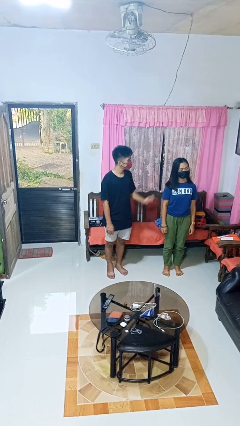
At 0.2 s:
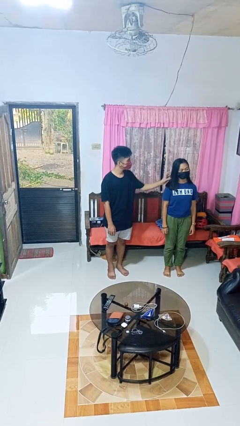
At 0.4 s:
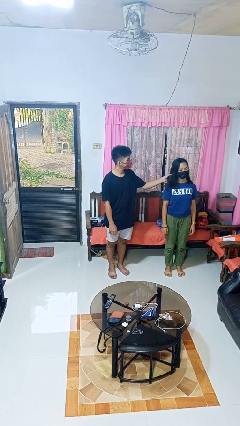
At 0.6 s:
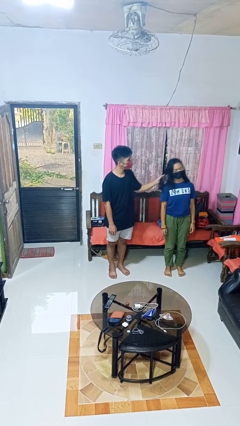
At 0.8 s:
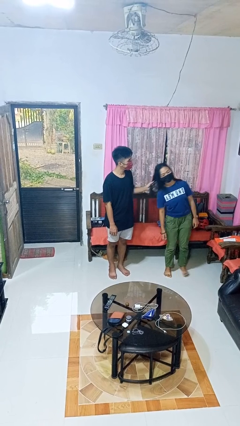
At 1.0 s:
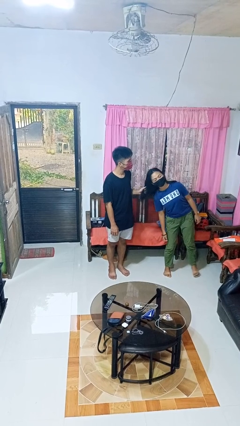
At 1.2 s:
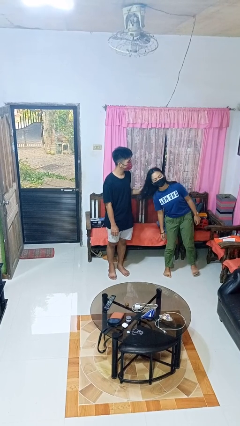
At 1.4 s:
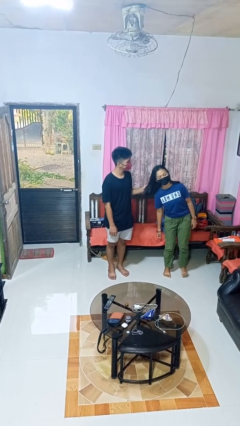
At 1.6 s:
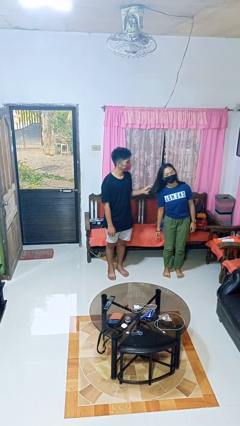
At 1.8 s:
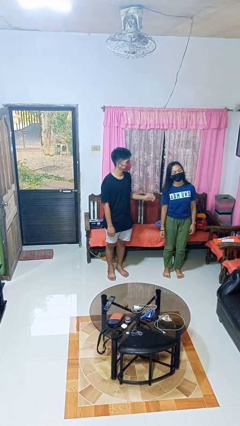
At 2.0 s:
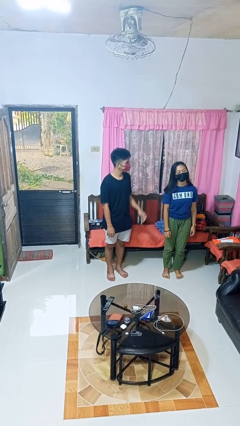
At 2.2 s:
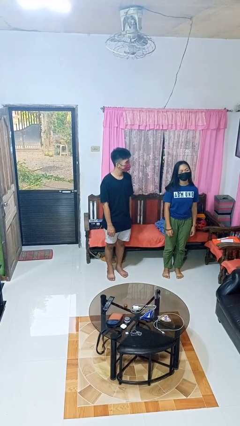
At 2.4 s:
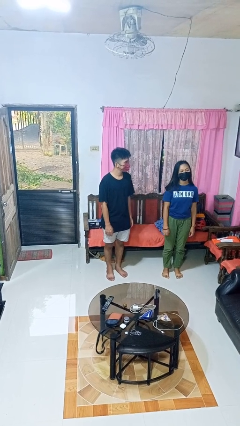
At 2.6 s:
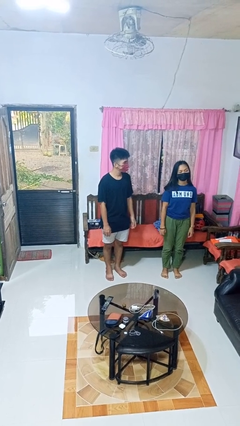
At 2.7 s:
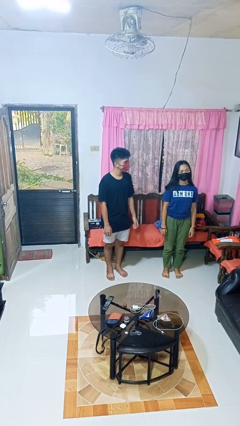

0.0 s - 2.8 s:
person grabs person by hair

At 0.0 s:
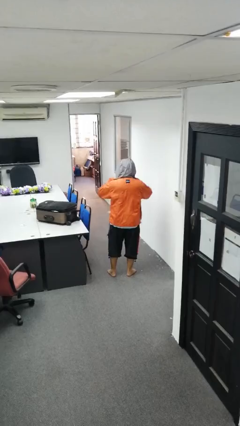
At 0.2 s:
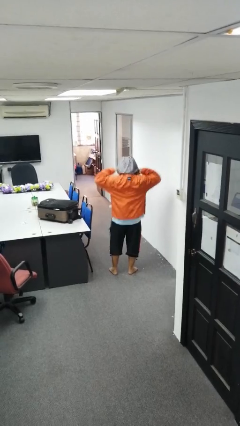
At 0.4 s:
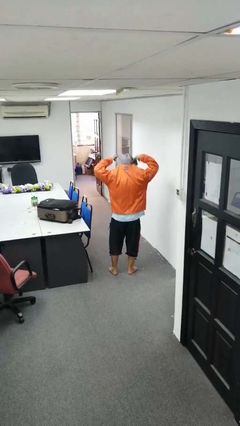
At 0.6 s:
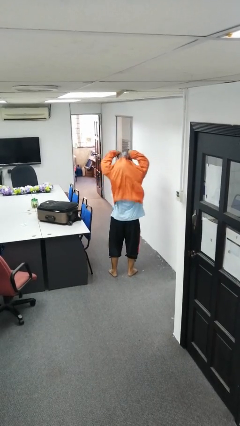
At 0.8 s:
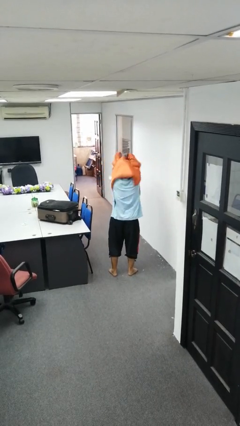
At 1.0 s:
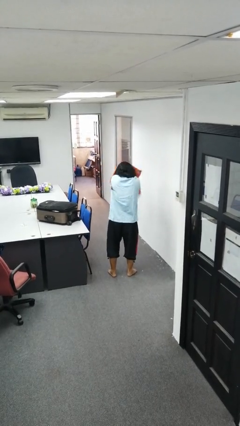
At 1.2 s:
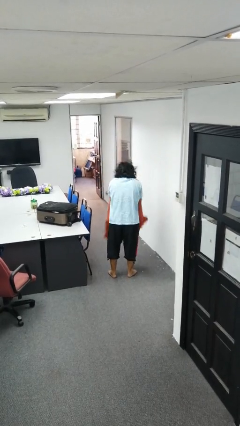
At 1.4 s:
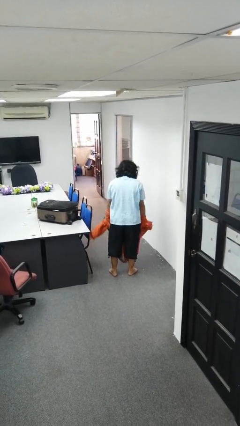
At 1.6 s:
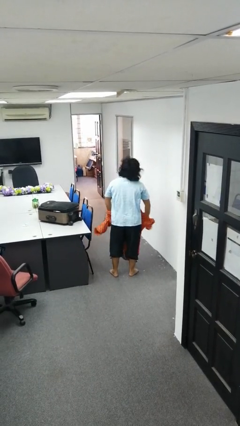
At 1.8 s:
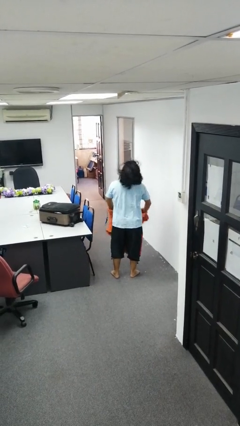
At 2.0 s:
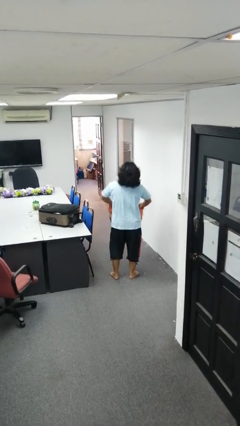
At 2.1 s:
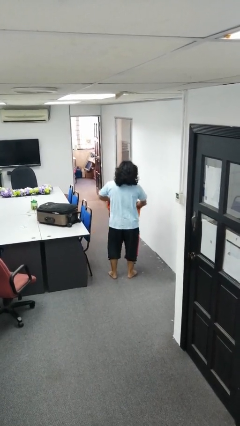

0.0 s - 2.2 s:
person takes off hoodie

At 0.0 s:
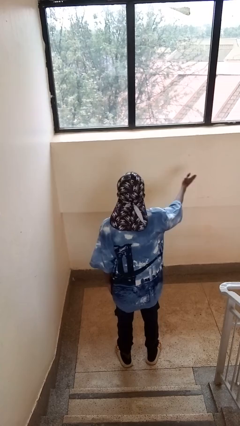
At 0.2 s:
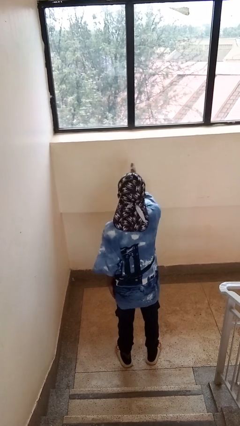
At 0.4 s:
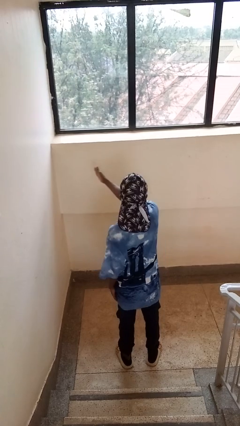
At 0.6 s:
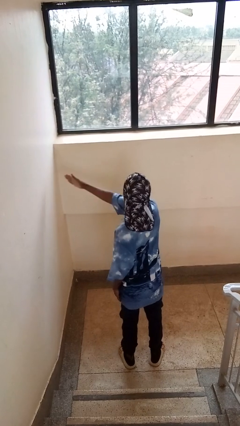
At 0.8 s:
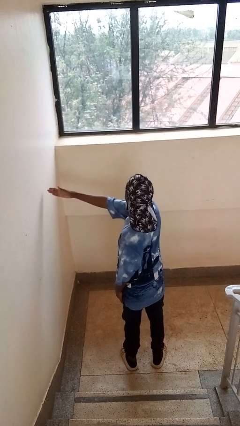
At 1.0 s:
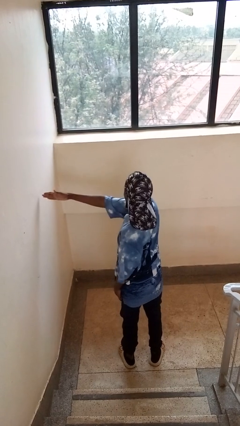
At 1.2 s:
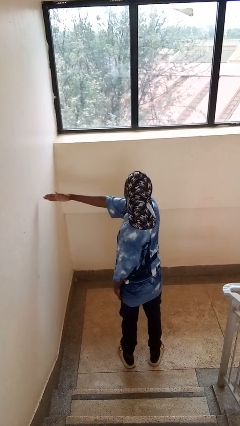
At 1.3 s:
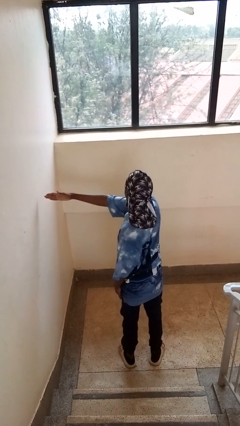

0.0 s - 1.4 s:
person gestures swipe left

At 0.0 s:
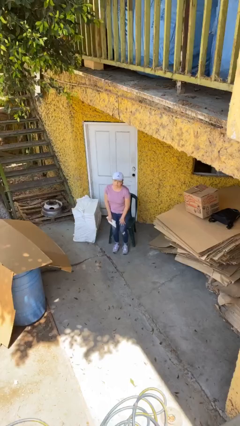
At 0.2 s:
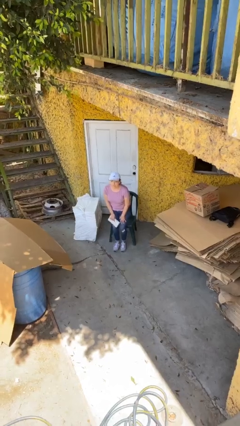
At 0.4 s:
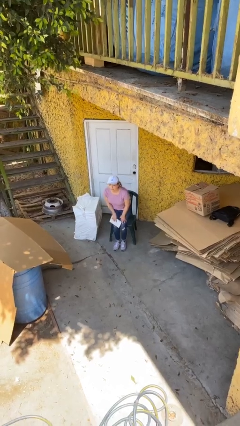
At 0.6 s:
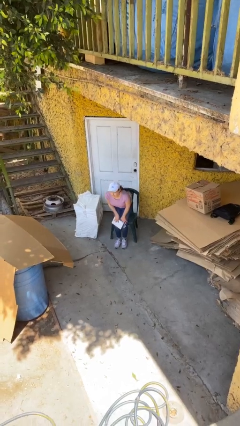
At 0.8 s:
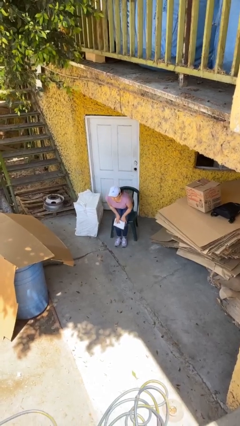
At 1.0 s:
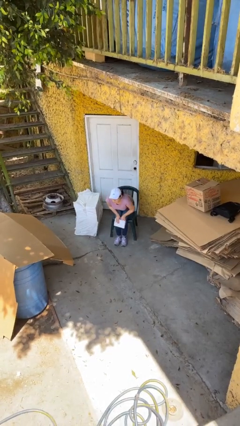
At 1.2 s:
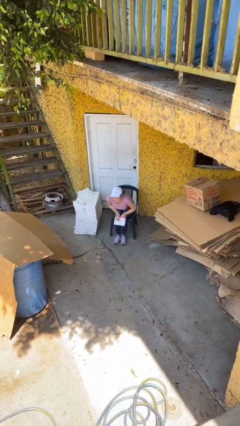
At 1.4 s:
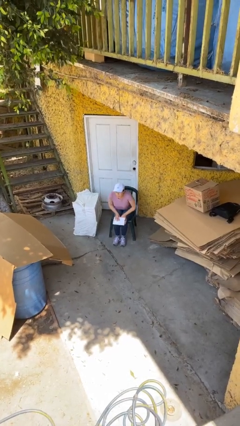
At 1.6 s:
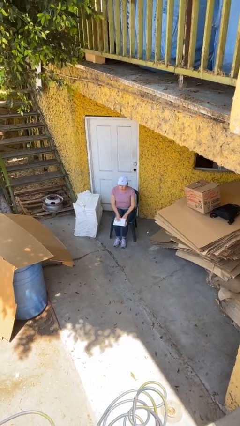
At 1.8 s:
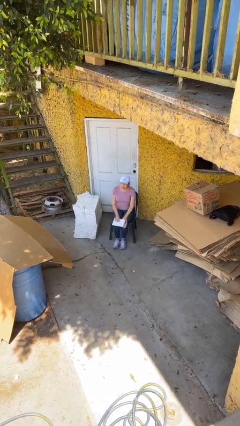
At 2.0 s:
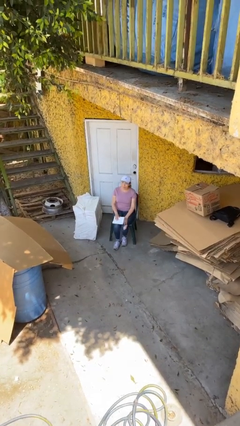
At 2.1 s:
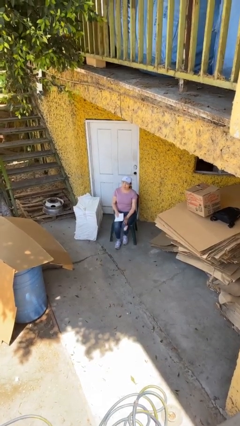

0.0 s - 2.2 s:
person sits down

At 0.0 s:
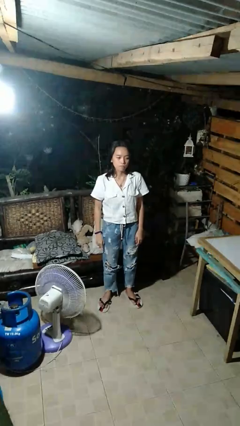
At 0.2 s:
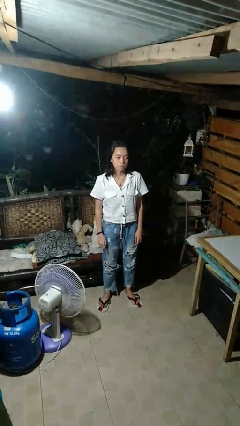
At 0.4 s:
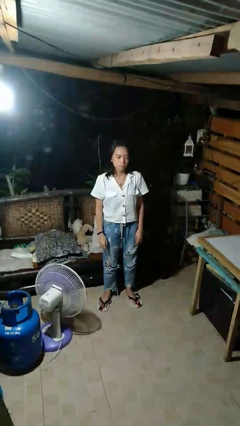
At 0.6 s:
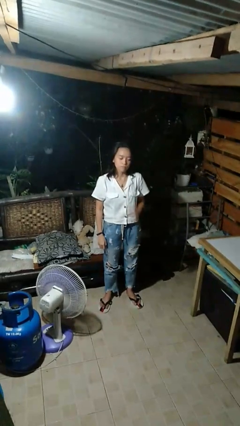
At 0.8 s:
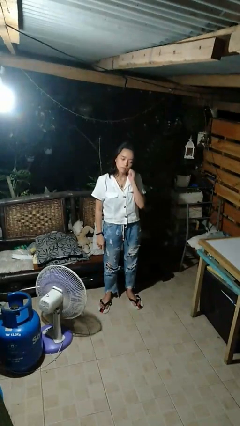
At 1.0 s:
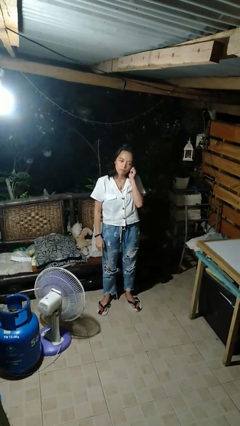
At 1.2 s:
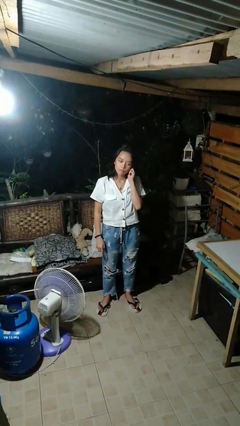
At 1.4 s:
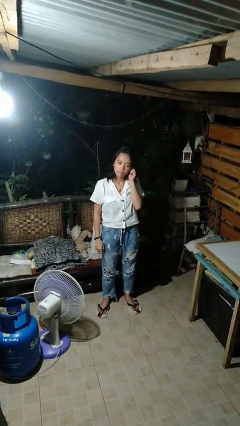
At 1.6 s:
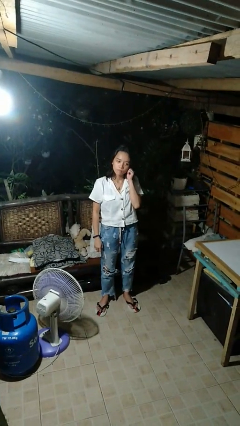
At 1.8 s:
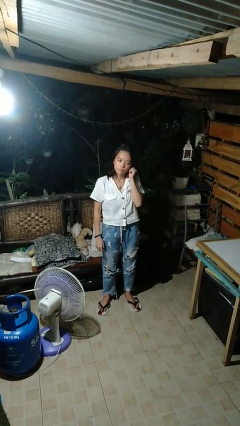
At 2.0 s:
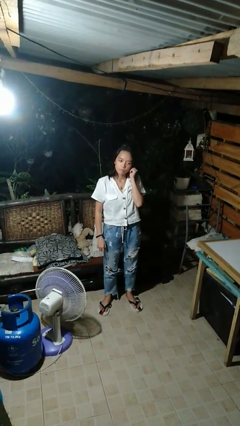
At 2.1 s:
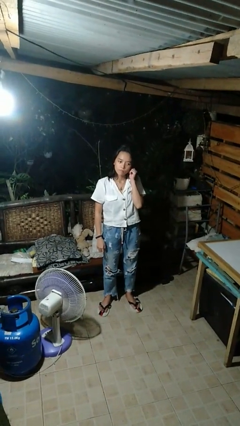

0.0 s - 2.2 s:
person touches earlobe

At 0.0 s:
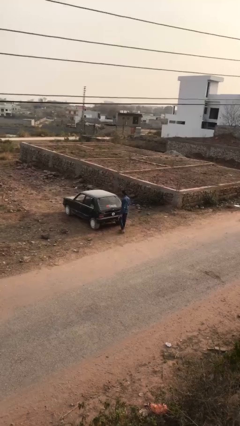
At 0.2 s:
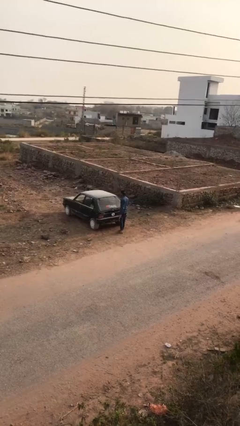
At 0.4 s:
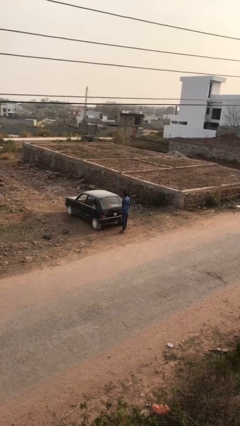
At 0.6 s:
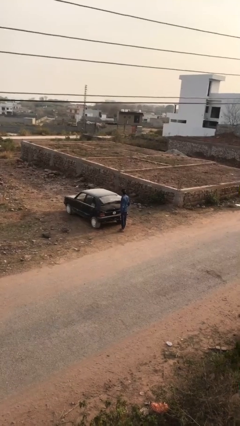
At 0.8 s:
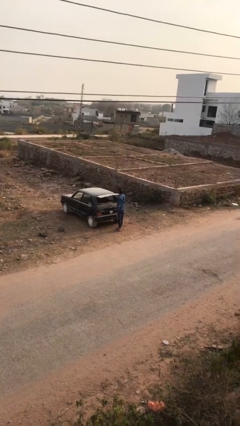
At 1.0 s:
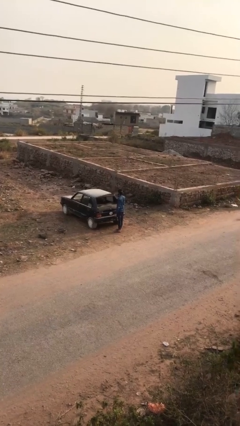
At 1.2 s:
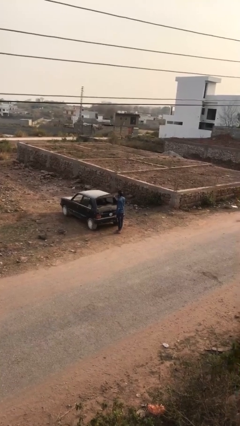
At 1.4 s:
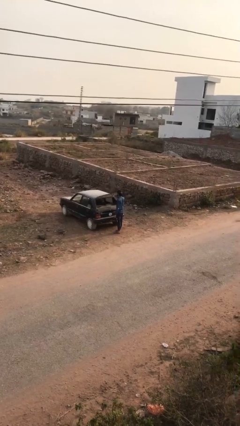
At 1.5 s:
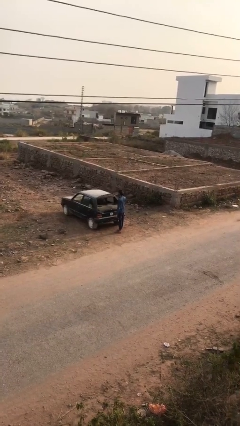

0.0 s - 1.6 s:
person opens car trunk

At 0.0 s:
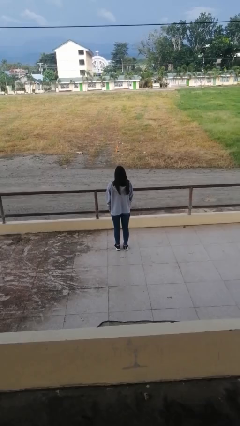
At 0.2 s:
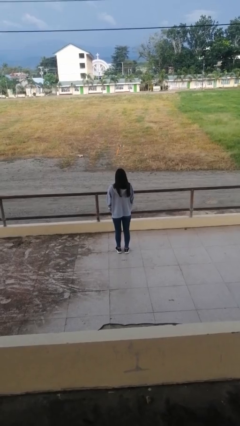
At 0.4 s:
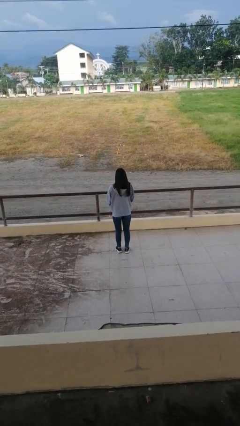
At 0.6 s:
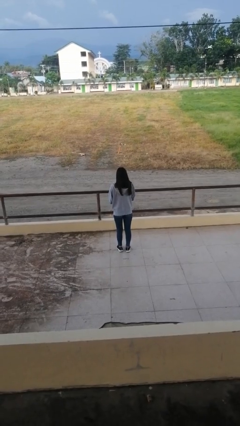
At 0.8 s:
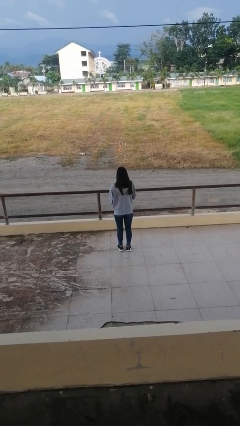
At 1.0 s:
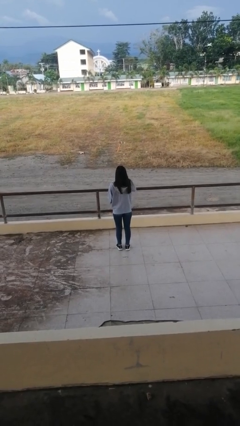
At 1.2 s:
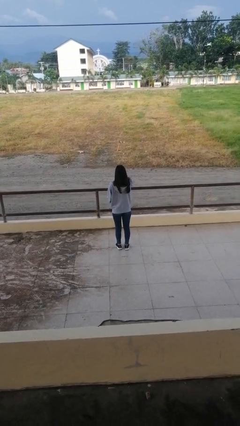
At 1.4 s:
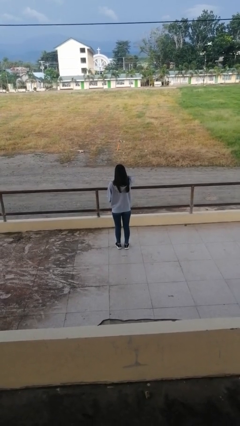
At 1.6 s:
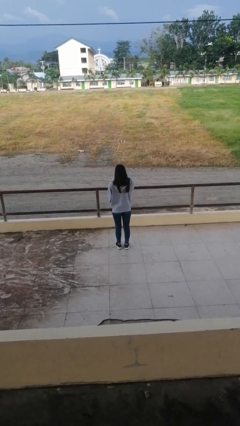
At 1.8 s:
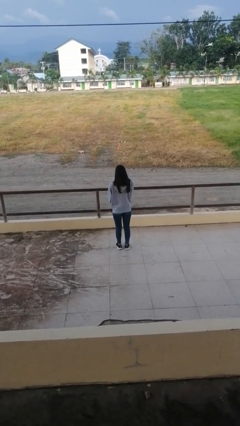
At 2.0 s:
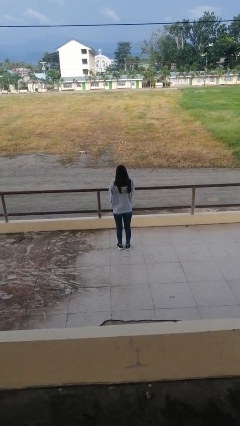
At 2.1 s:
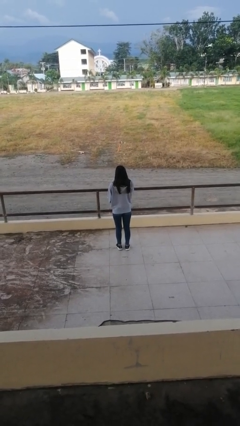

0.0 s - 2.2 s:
person zips up jacket

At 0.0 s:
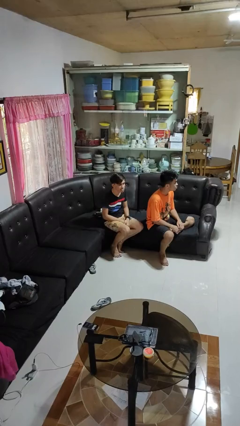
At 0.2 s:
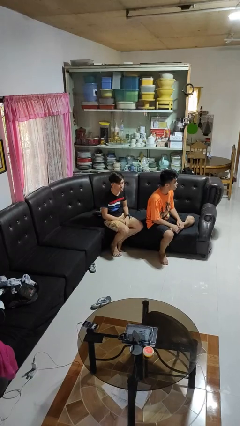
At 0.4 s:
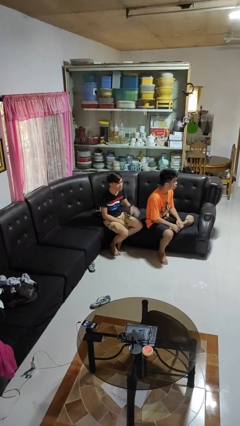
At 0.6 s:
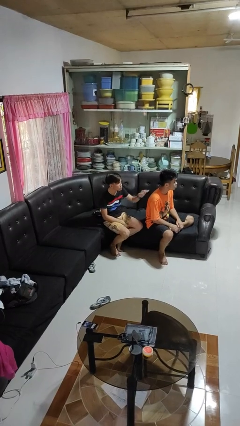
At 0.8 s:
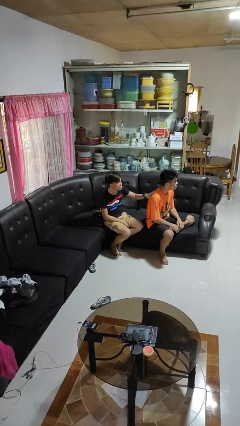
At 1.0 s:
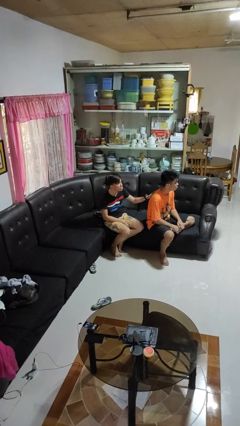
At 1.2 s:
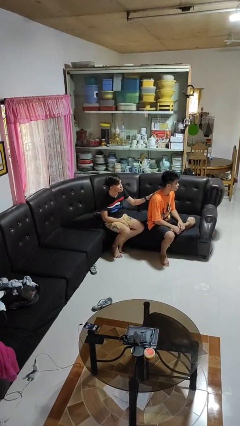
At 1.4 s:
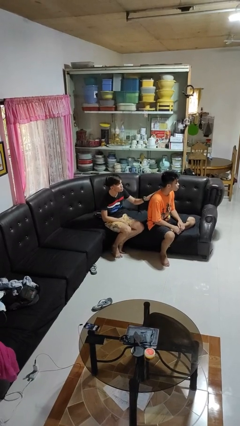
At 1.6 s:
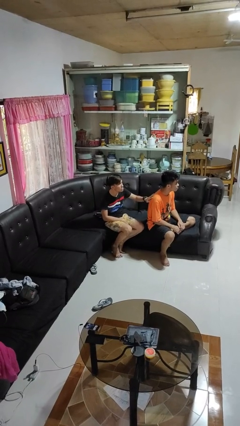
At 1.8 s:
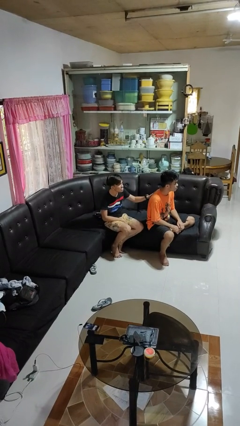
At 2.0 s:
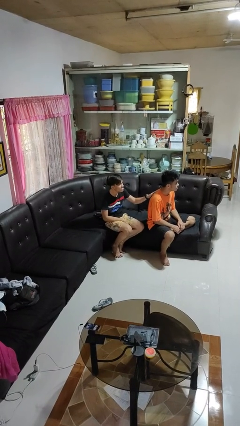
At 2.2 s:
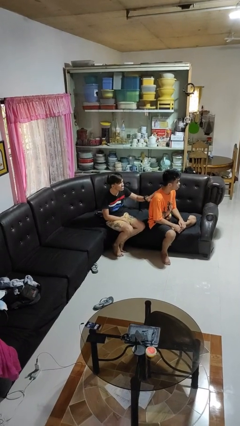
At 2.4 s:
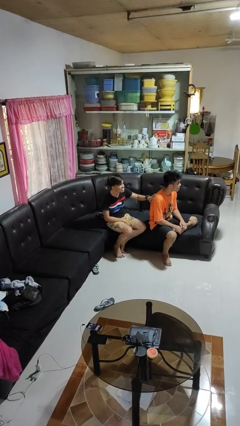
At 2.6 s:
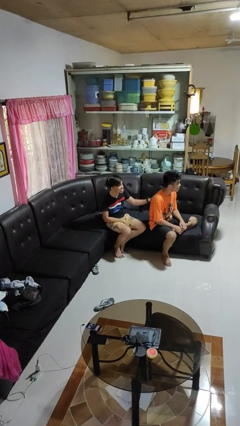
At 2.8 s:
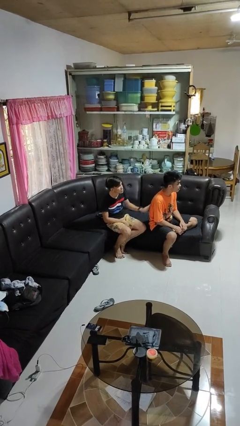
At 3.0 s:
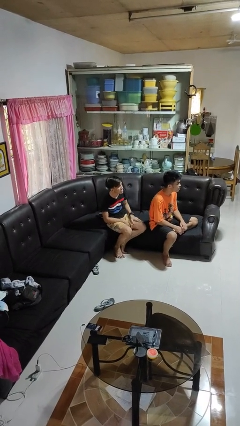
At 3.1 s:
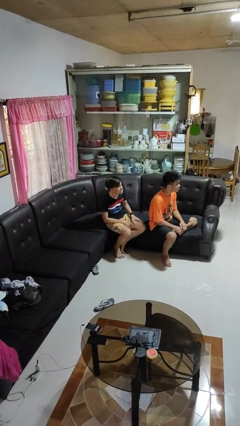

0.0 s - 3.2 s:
person touches back of person
